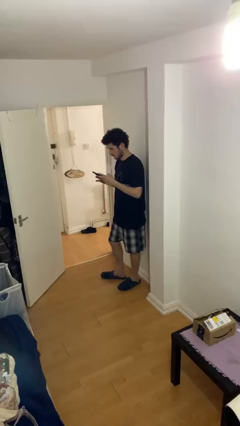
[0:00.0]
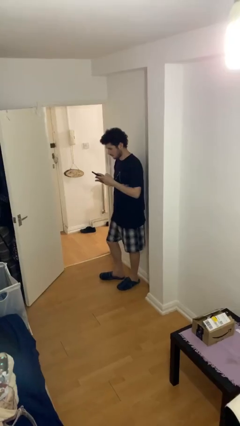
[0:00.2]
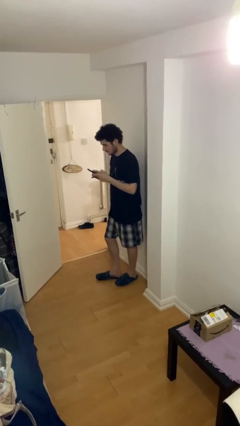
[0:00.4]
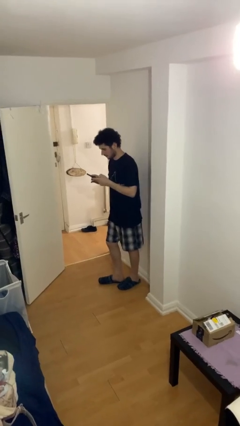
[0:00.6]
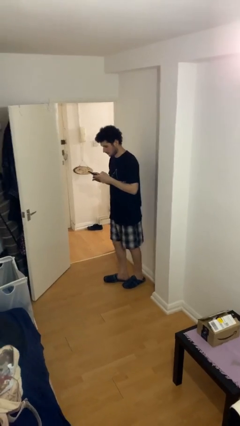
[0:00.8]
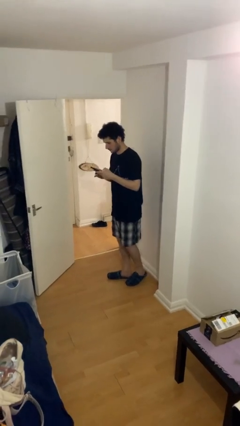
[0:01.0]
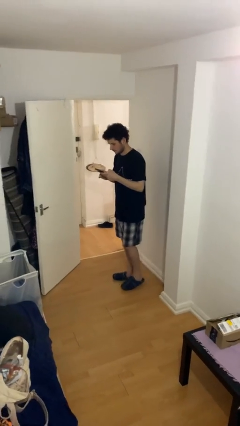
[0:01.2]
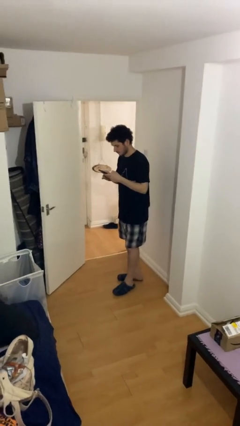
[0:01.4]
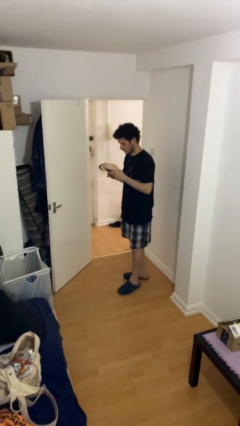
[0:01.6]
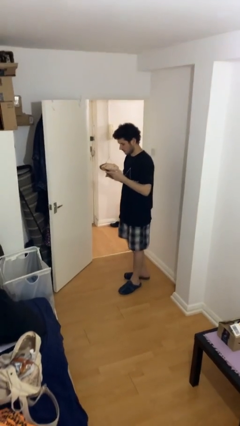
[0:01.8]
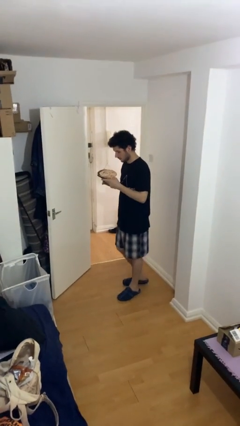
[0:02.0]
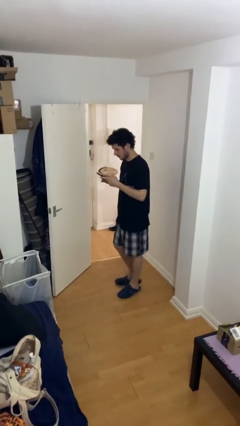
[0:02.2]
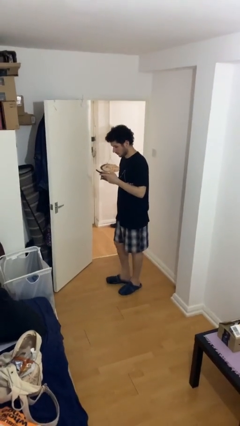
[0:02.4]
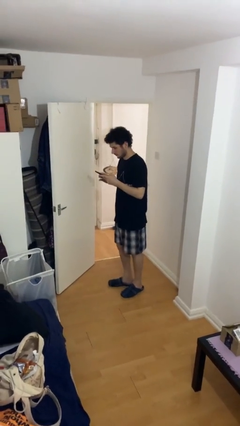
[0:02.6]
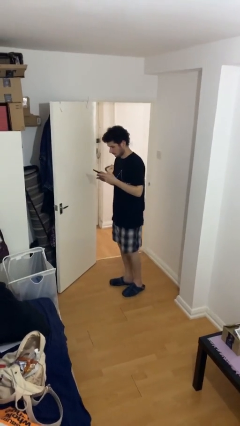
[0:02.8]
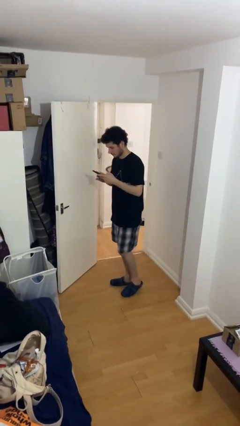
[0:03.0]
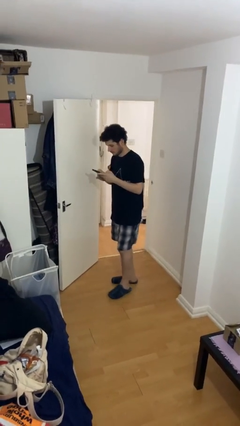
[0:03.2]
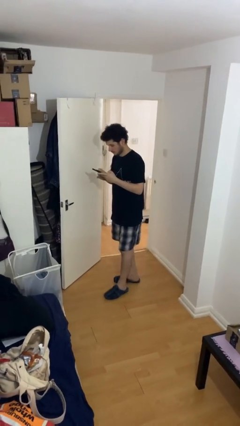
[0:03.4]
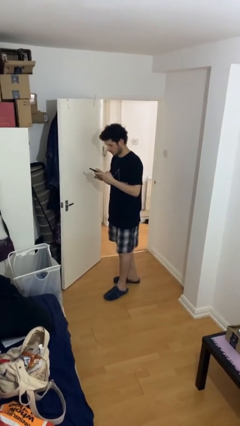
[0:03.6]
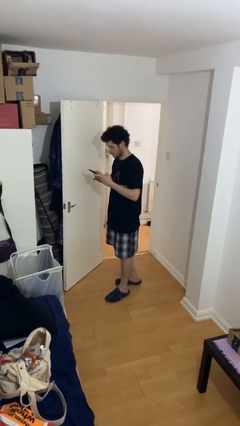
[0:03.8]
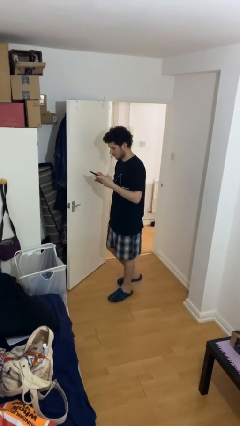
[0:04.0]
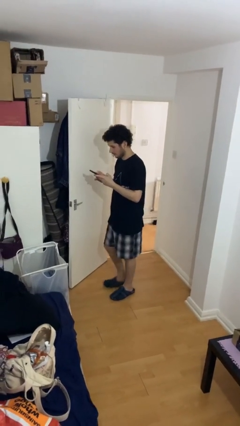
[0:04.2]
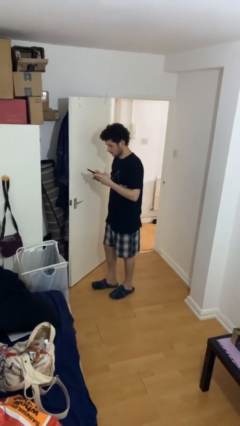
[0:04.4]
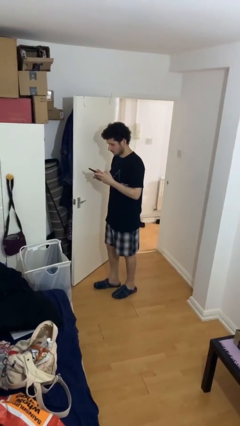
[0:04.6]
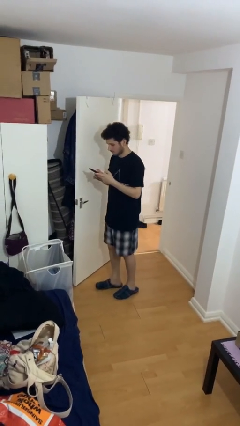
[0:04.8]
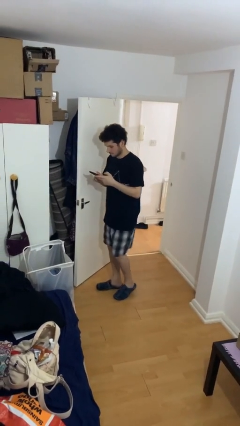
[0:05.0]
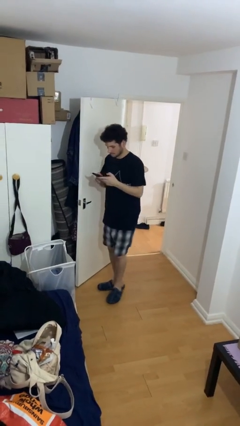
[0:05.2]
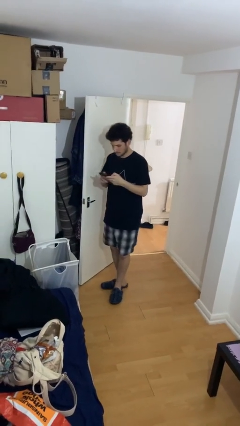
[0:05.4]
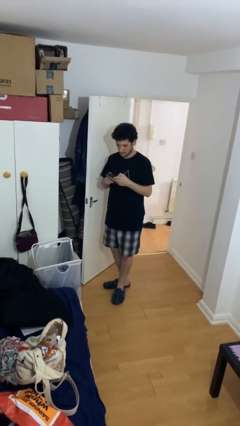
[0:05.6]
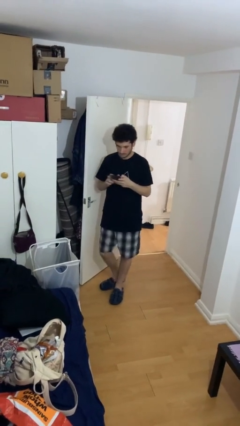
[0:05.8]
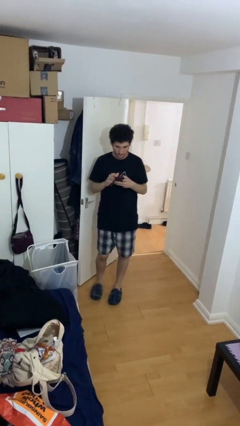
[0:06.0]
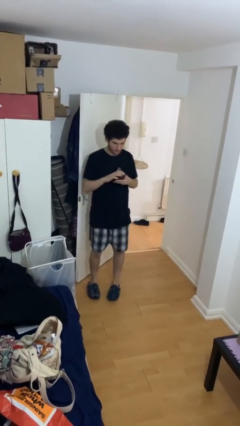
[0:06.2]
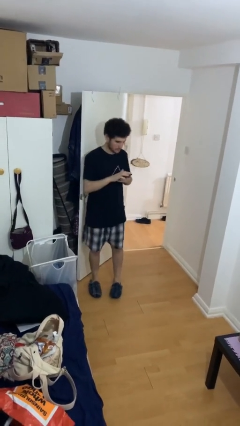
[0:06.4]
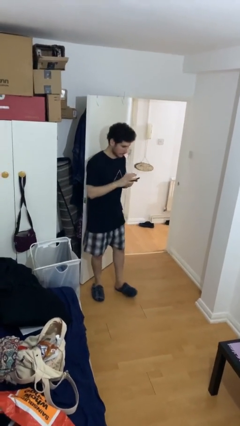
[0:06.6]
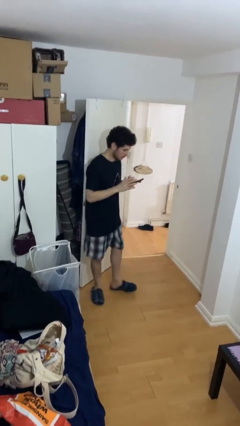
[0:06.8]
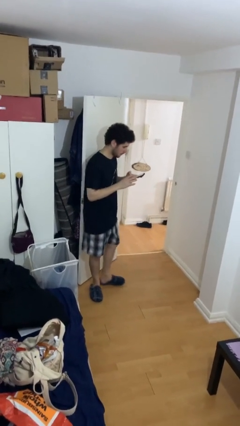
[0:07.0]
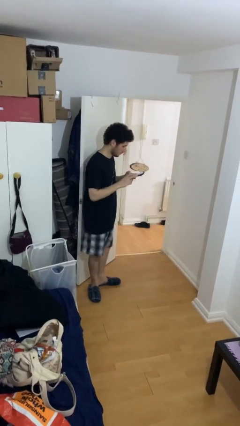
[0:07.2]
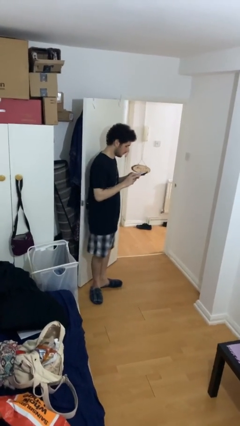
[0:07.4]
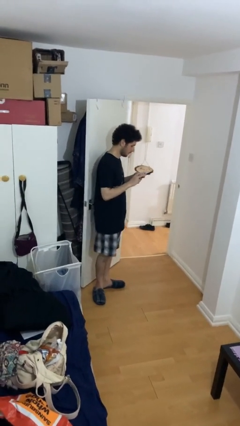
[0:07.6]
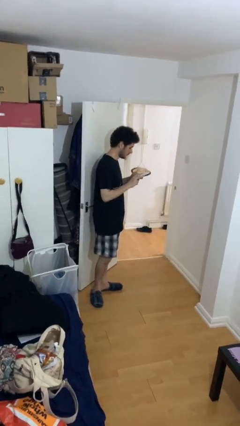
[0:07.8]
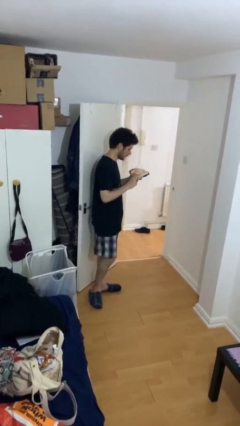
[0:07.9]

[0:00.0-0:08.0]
person texts on phone

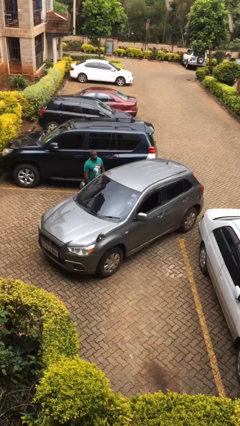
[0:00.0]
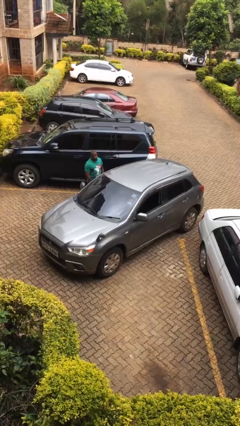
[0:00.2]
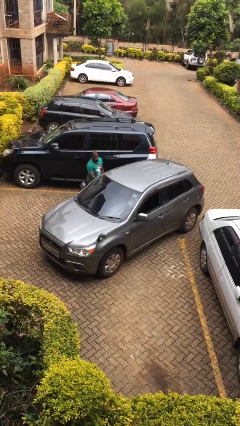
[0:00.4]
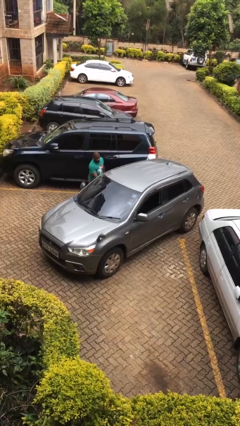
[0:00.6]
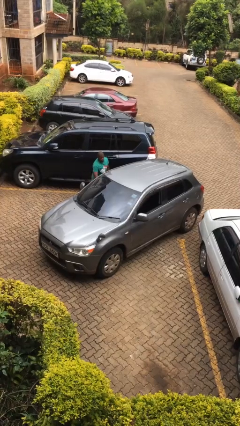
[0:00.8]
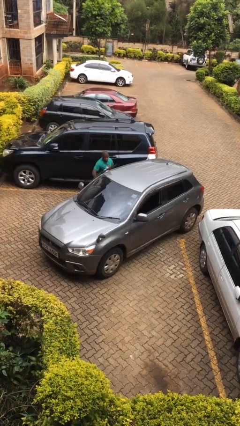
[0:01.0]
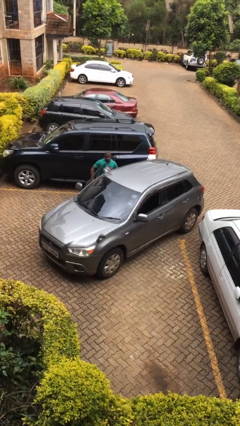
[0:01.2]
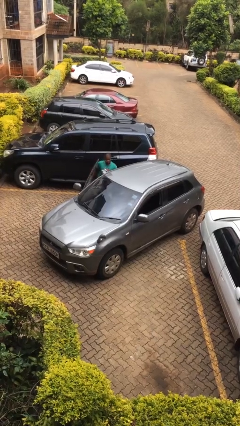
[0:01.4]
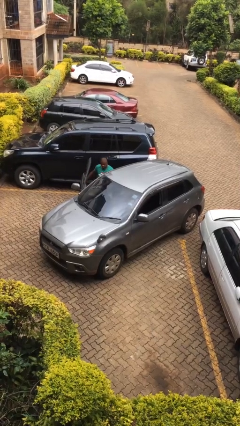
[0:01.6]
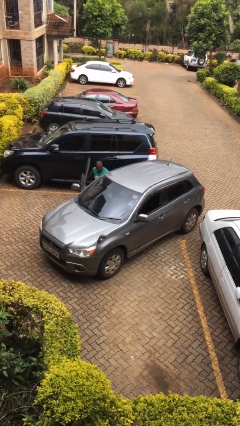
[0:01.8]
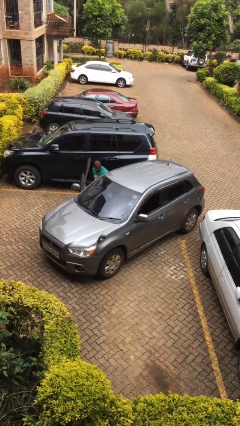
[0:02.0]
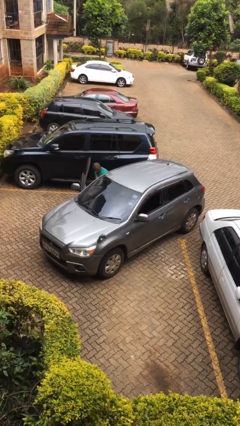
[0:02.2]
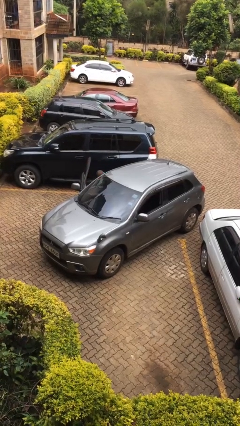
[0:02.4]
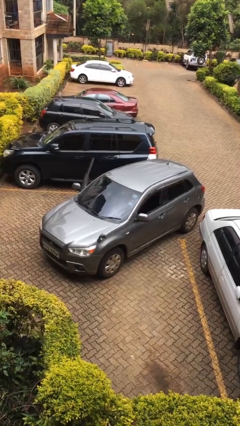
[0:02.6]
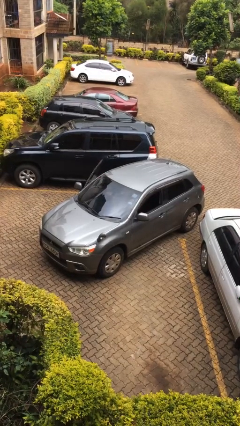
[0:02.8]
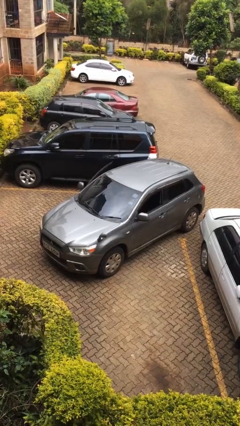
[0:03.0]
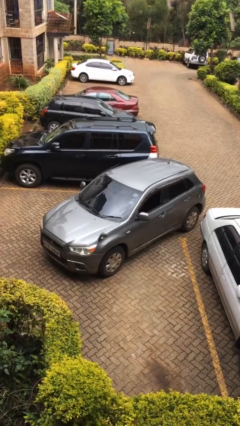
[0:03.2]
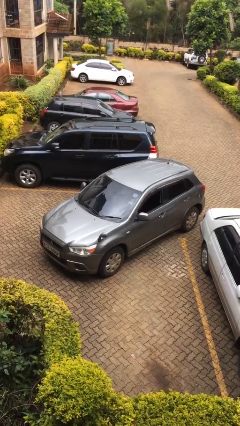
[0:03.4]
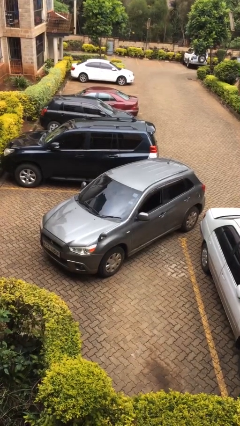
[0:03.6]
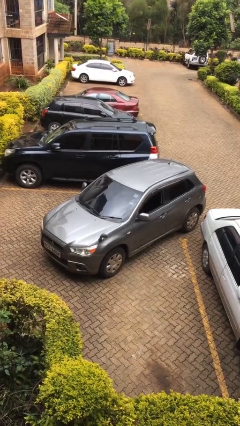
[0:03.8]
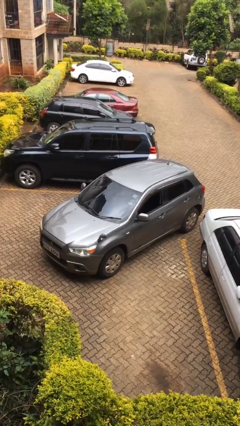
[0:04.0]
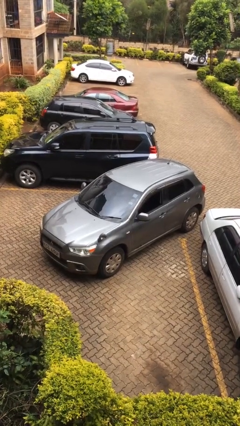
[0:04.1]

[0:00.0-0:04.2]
car picks up person

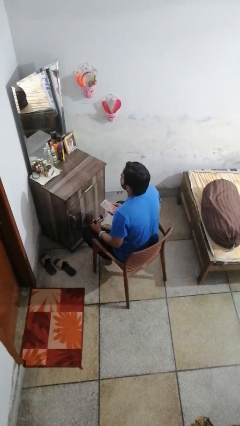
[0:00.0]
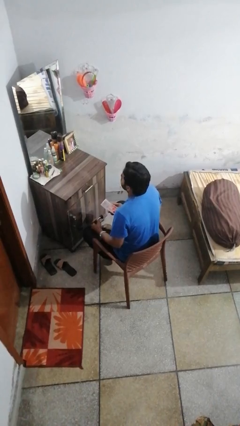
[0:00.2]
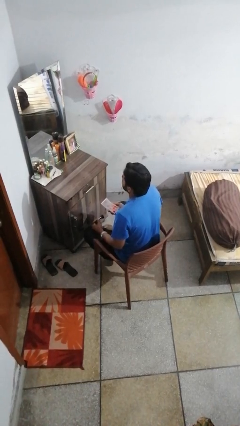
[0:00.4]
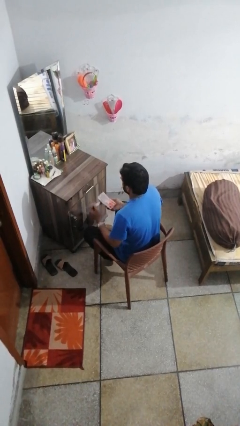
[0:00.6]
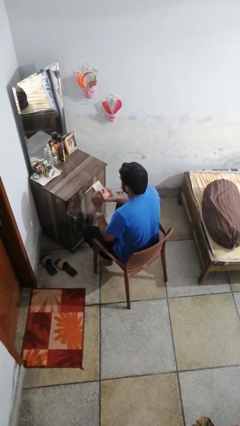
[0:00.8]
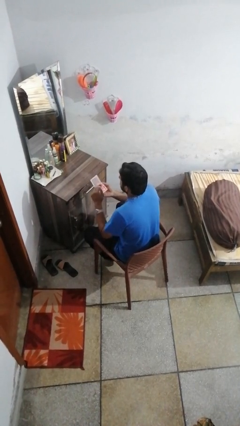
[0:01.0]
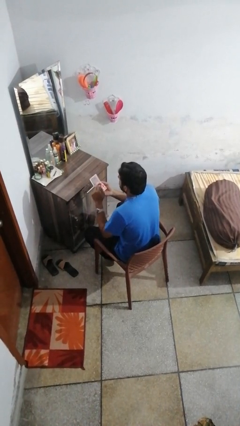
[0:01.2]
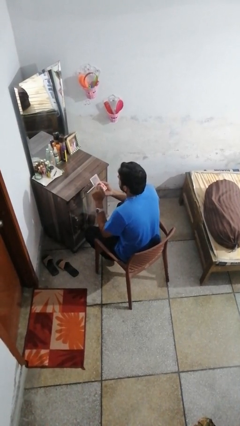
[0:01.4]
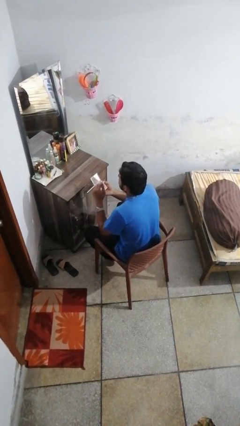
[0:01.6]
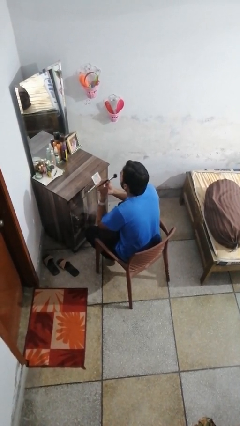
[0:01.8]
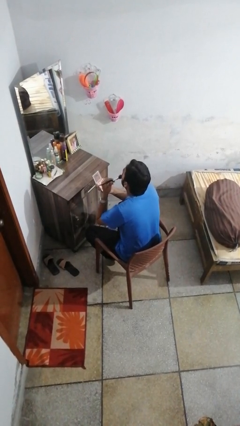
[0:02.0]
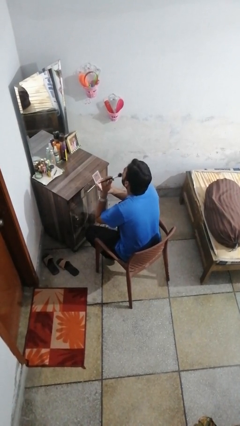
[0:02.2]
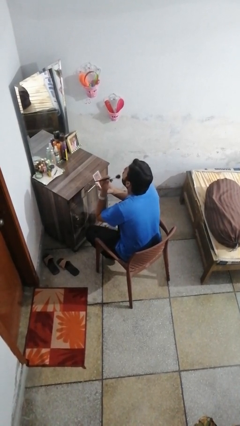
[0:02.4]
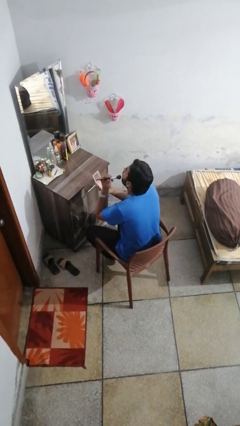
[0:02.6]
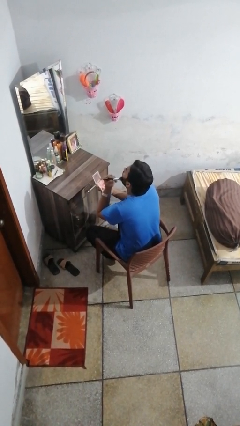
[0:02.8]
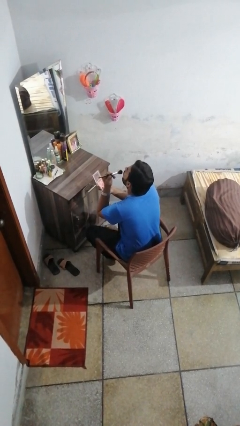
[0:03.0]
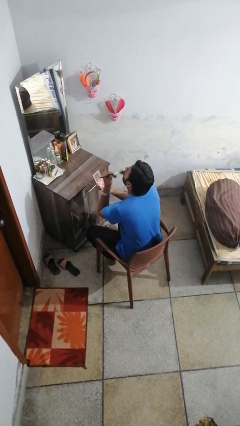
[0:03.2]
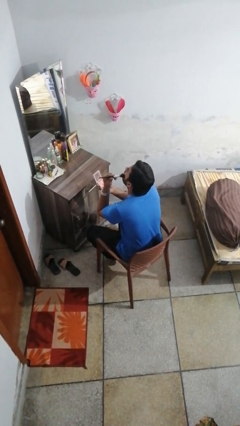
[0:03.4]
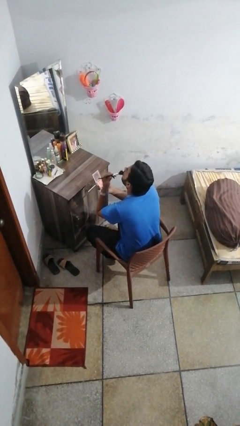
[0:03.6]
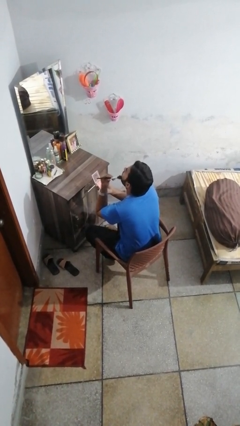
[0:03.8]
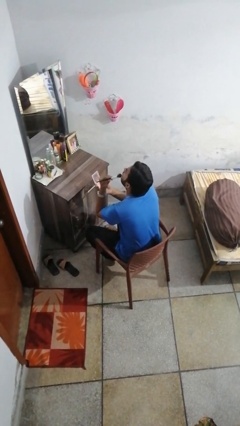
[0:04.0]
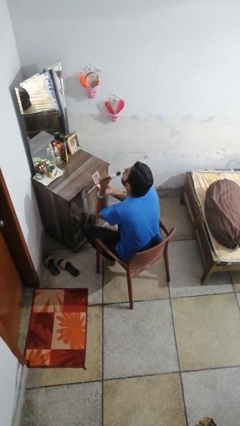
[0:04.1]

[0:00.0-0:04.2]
person applies foundation makeup

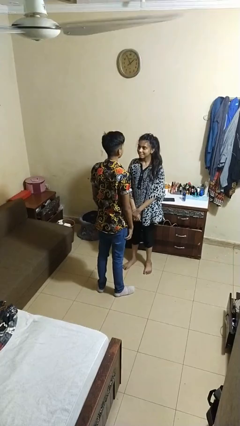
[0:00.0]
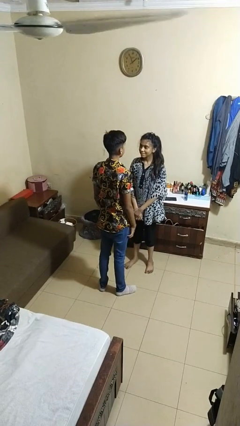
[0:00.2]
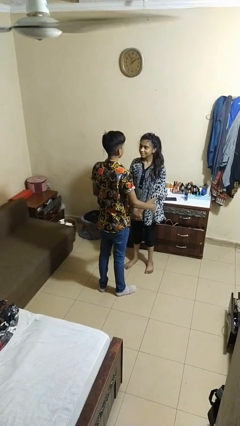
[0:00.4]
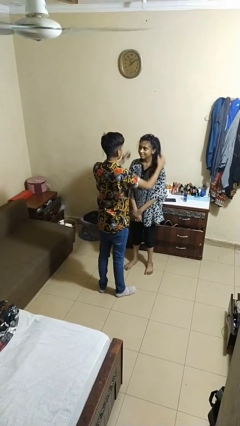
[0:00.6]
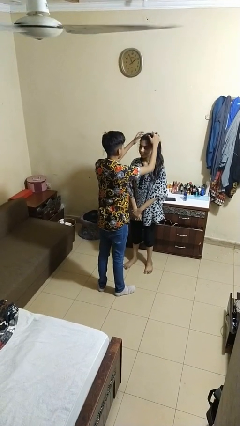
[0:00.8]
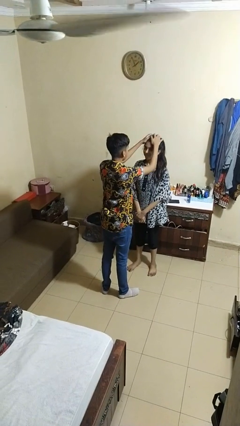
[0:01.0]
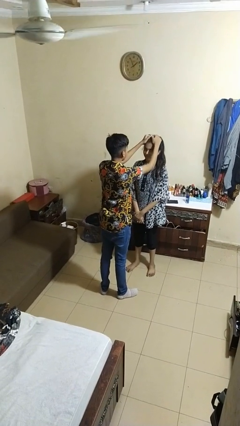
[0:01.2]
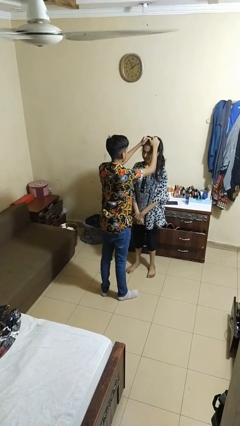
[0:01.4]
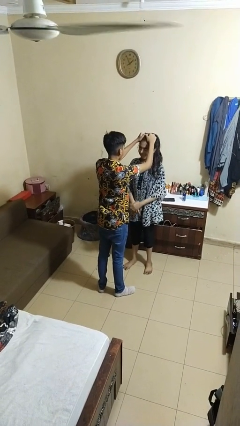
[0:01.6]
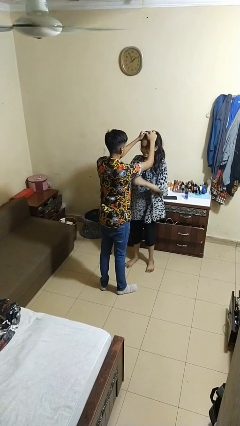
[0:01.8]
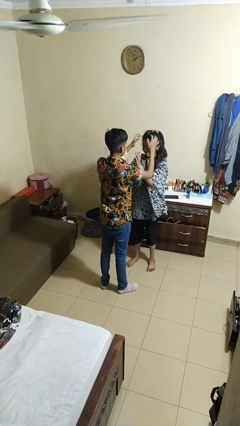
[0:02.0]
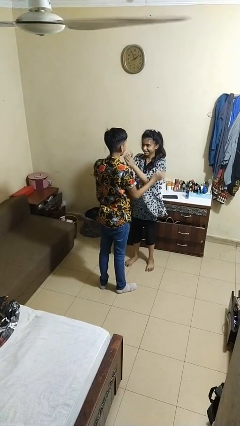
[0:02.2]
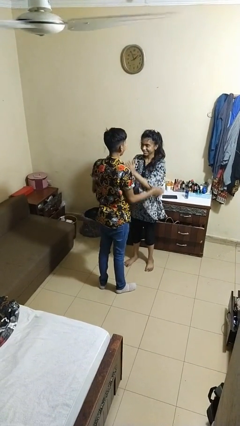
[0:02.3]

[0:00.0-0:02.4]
person grabs person by hair
